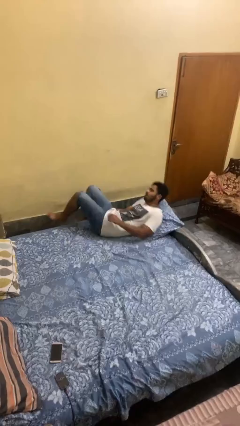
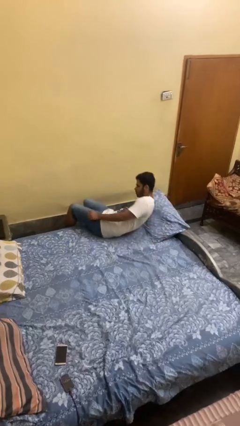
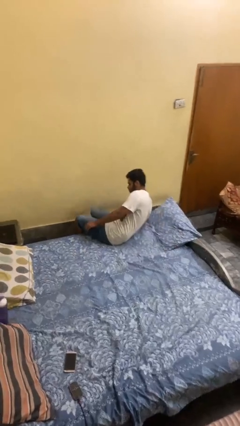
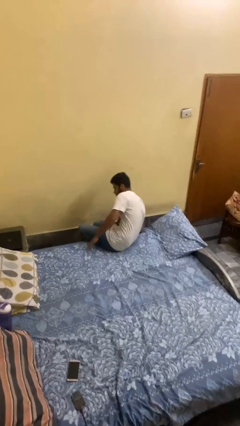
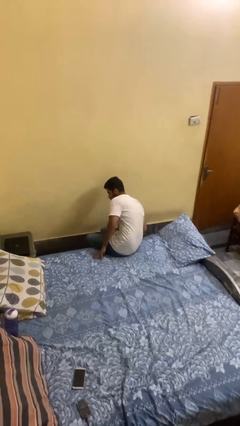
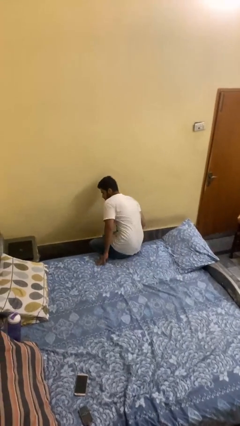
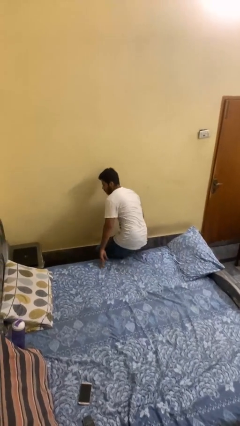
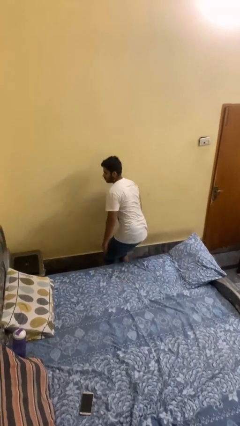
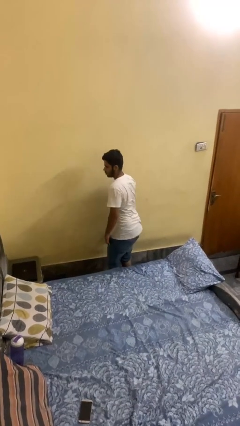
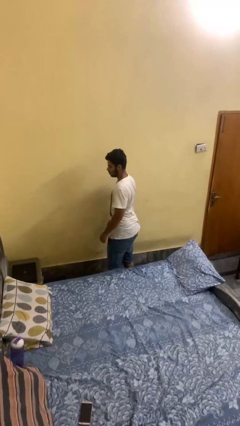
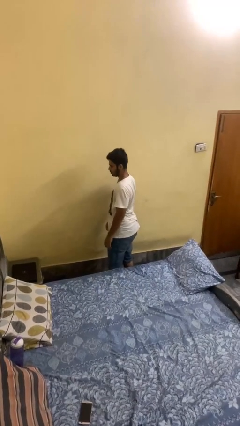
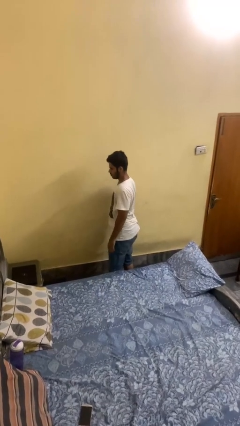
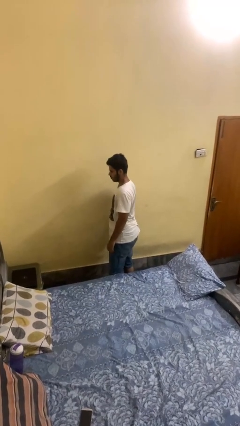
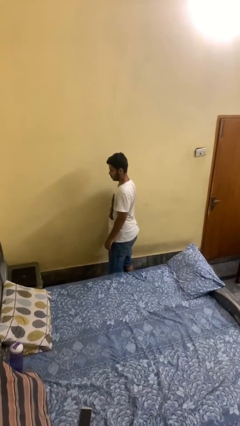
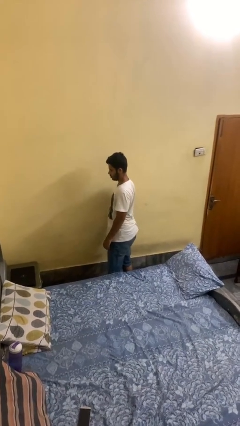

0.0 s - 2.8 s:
person stands up

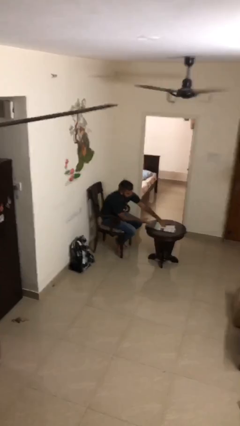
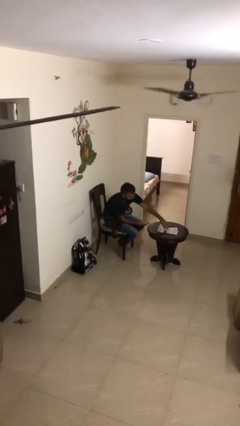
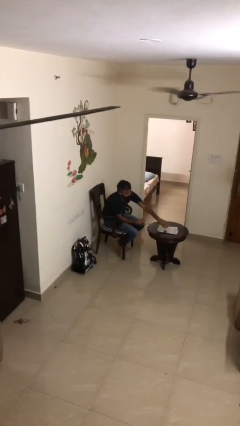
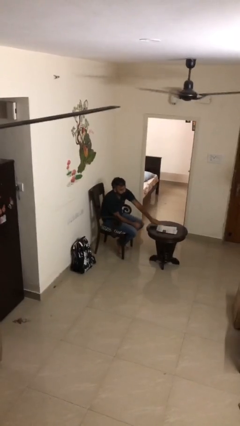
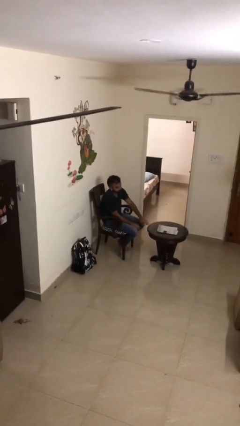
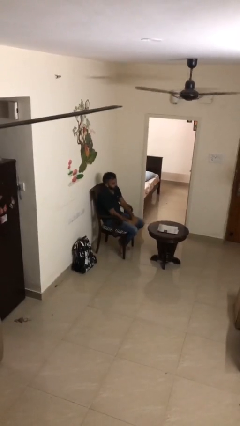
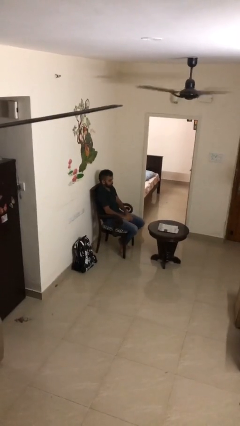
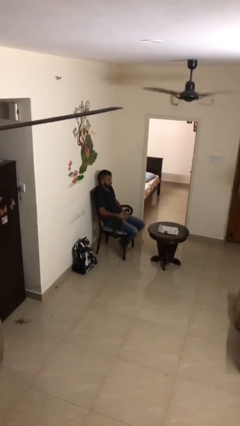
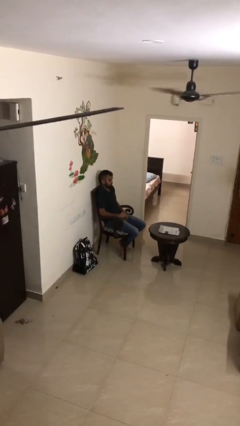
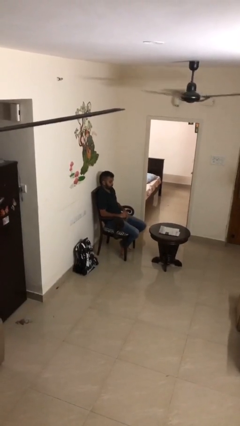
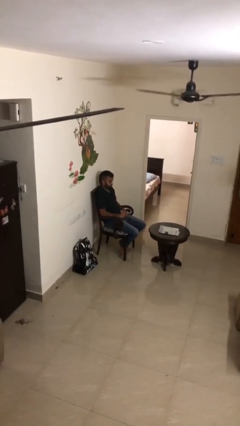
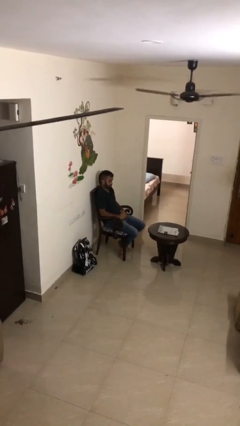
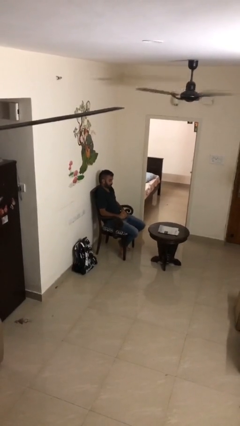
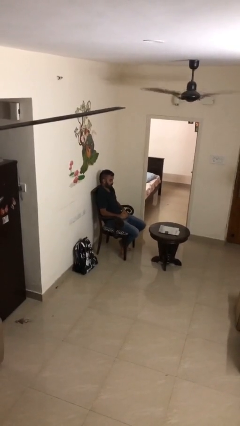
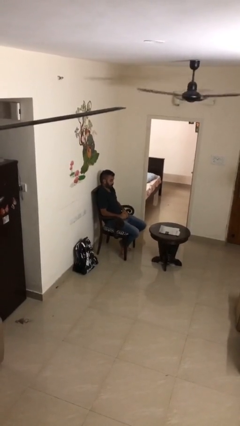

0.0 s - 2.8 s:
person puts down object on table

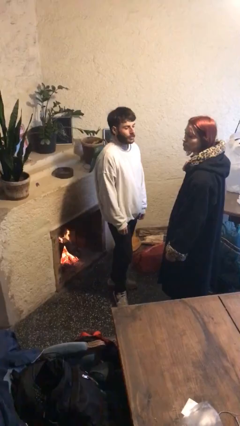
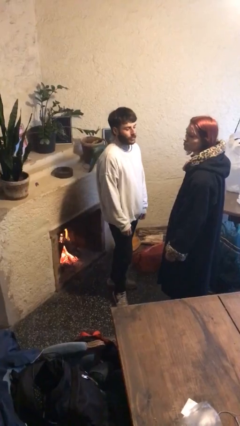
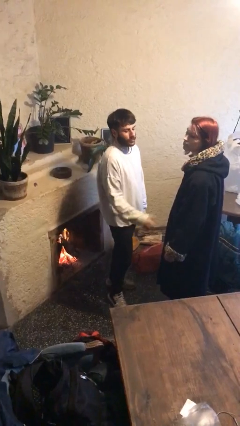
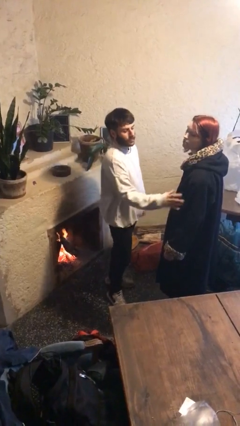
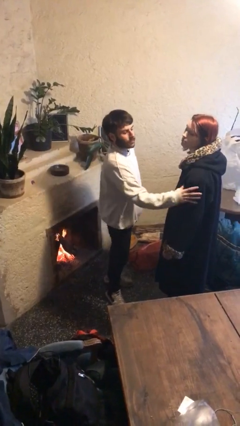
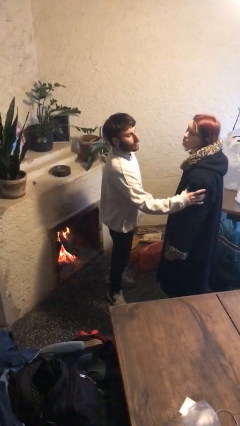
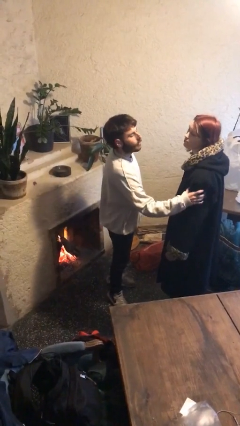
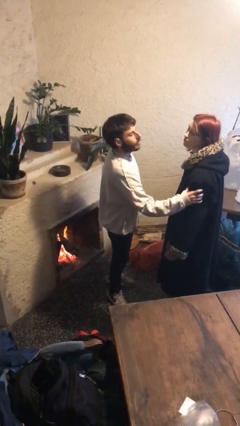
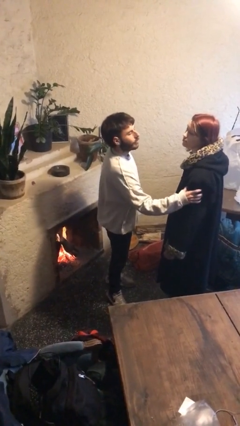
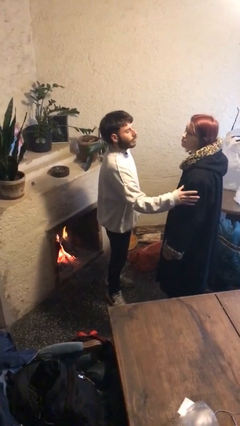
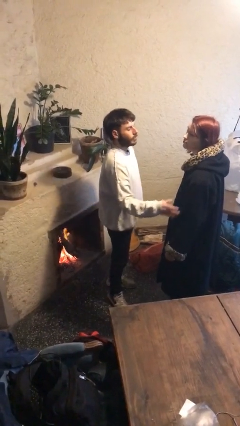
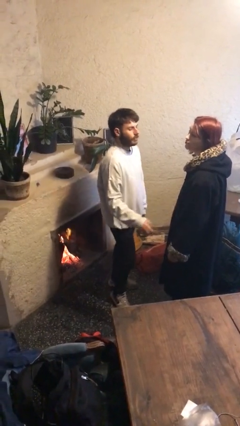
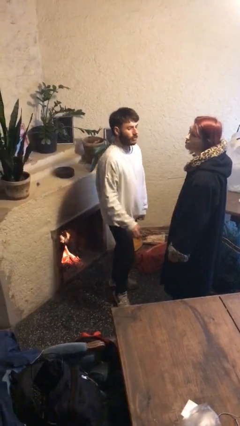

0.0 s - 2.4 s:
person grabs person by bicep

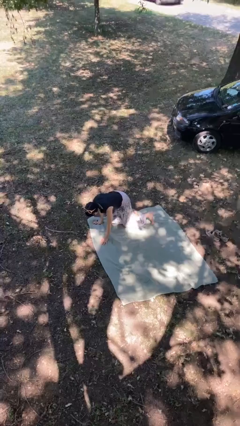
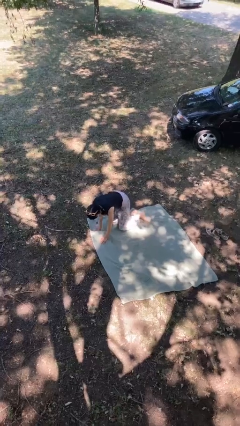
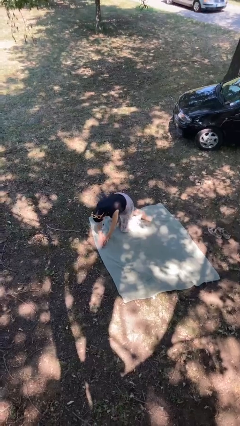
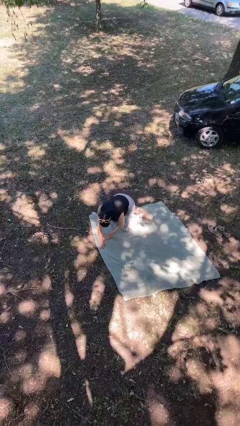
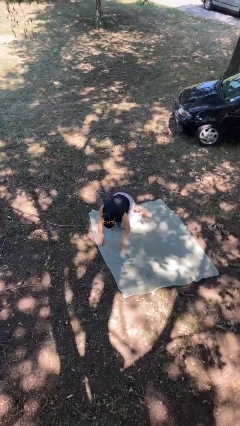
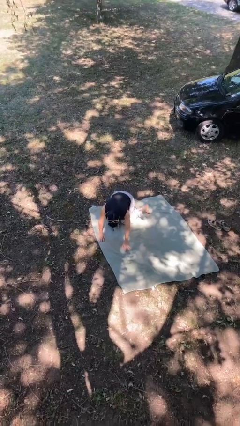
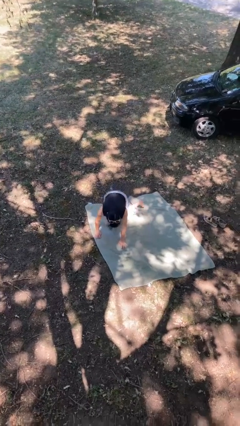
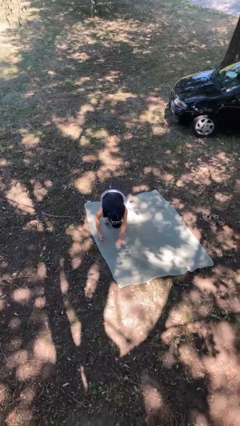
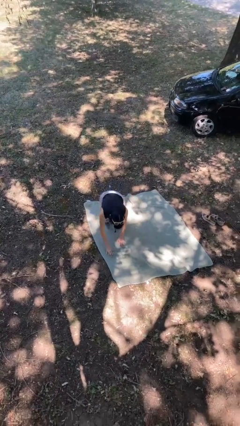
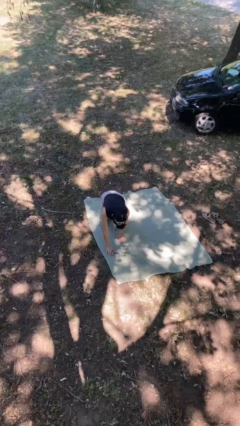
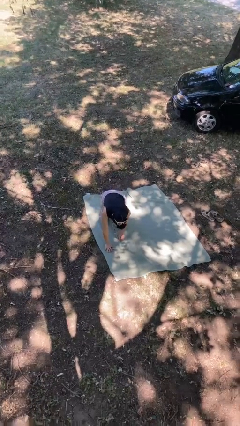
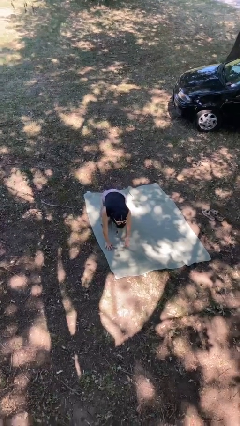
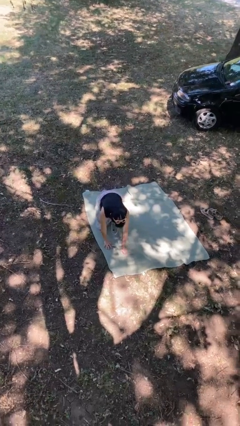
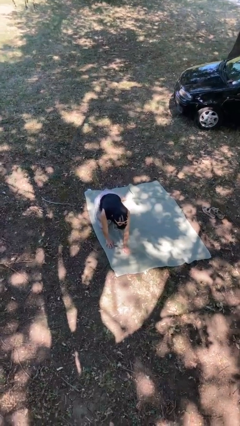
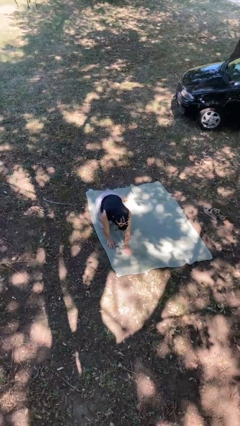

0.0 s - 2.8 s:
person crawls

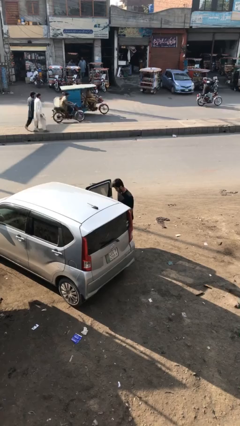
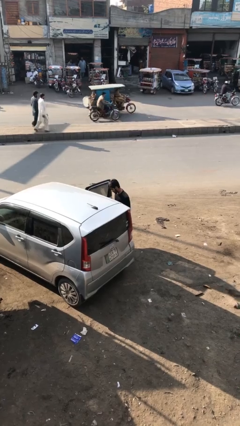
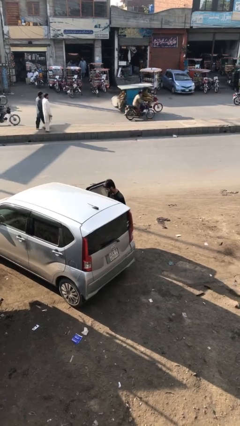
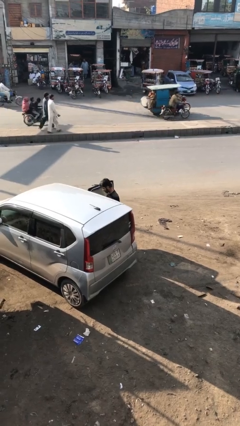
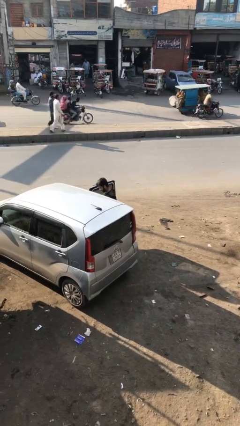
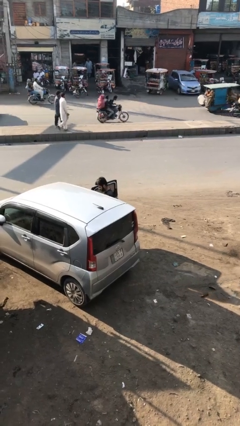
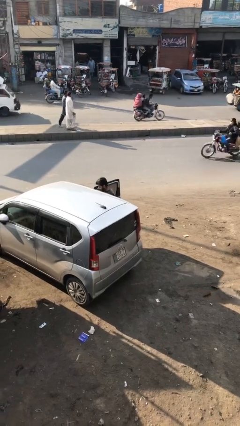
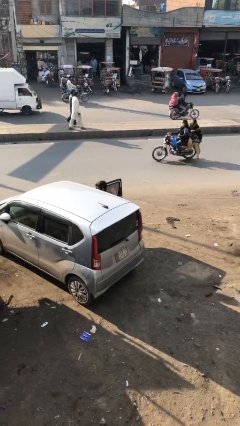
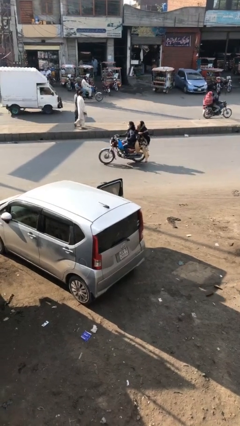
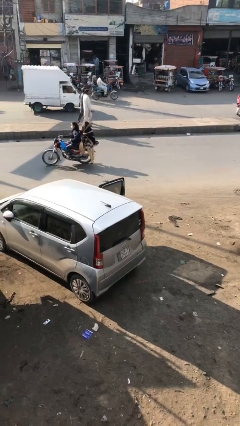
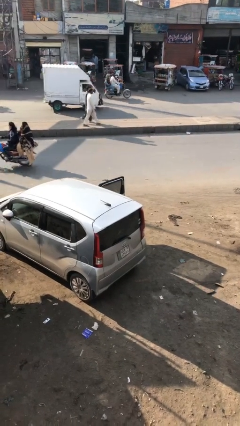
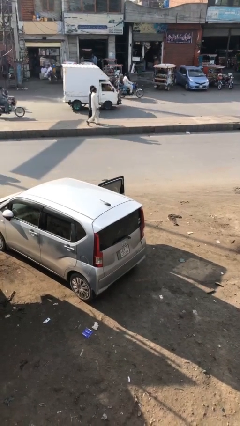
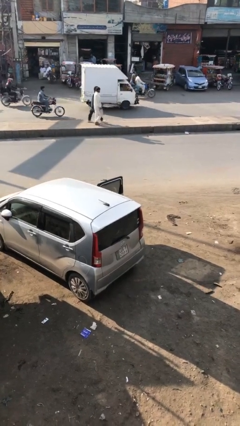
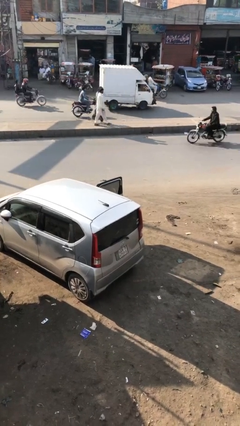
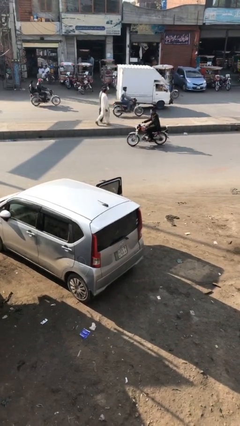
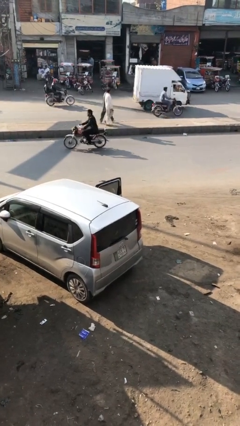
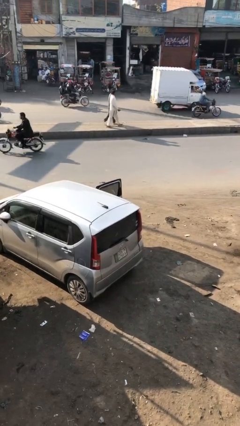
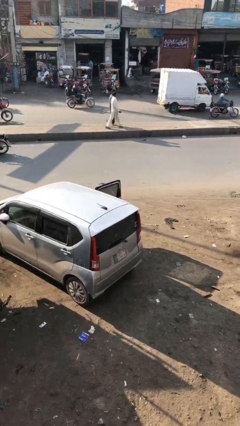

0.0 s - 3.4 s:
person enters car

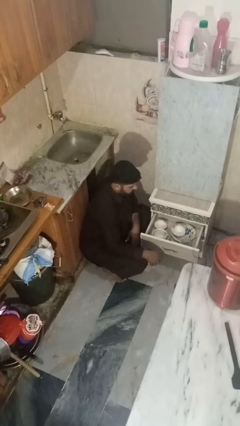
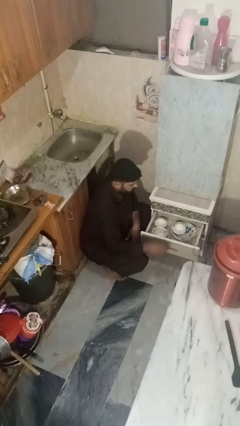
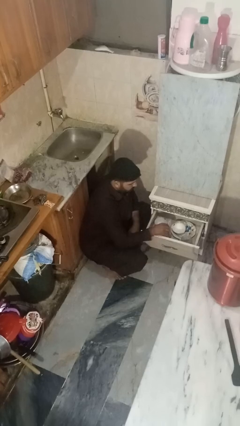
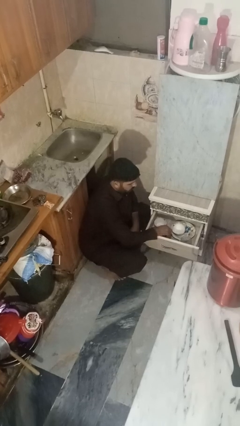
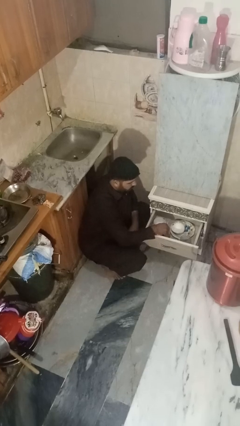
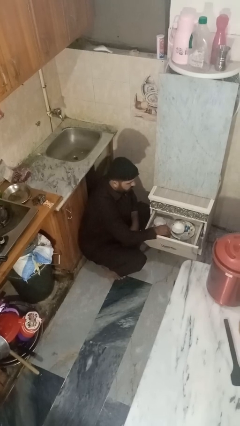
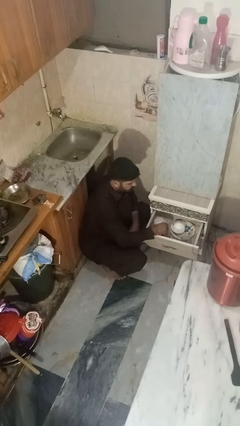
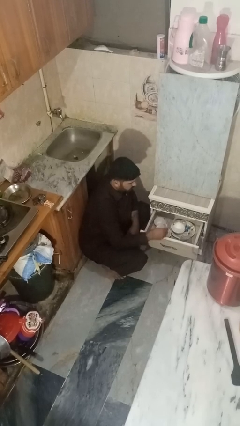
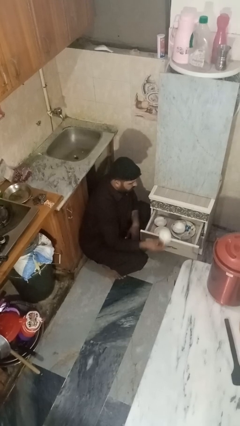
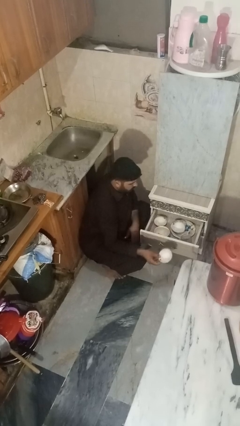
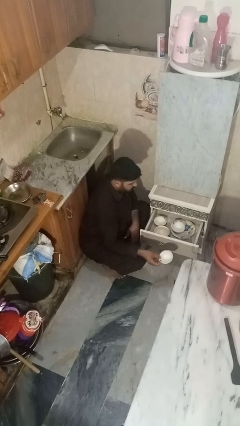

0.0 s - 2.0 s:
person takes object from kitchen drawer

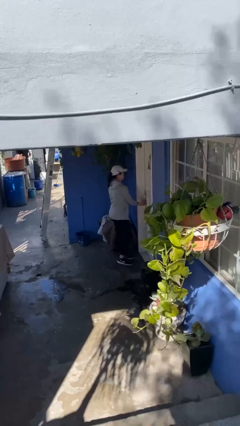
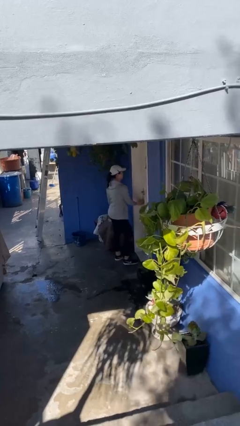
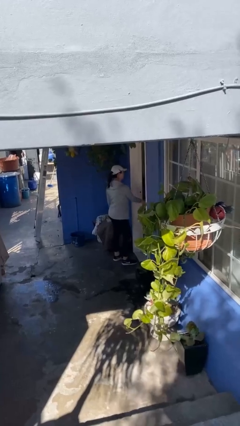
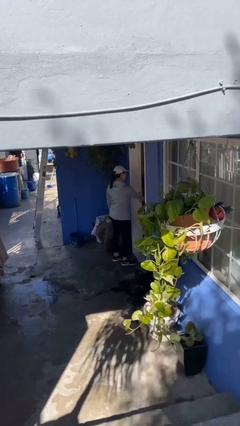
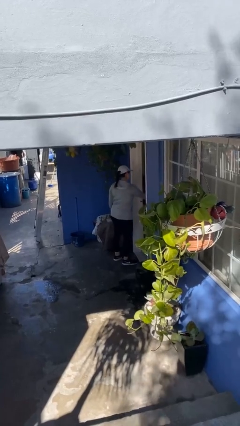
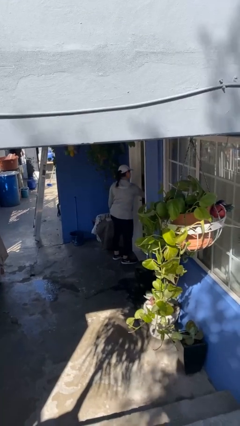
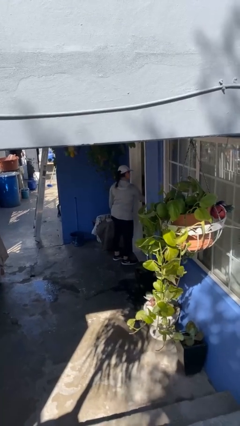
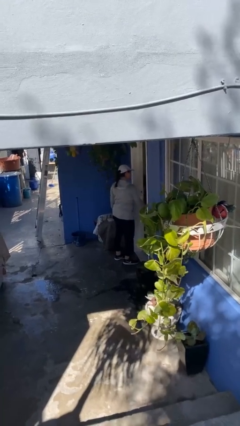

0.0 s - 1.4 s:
person opens facility door
